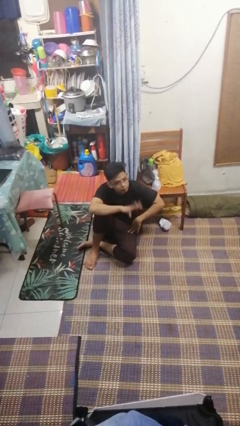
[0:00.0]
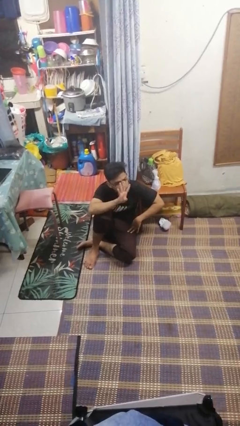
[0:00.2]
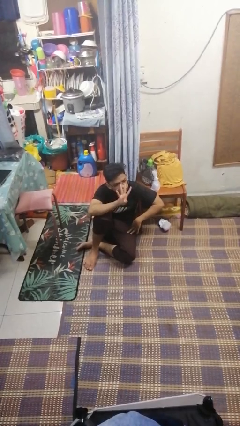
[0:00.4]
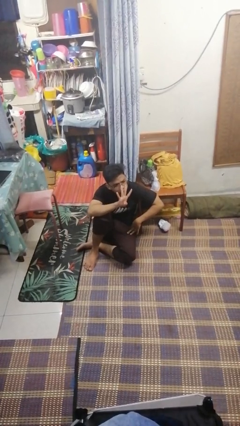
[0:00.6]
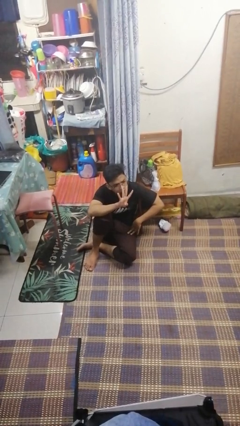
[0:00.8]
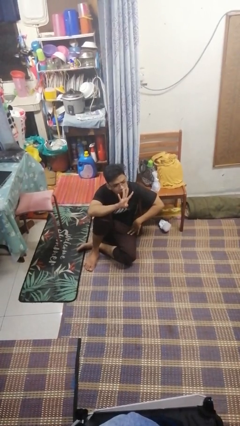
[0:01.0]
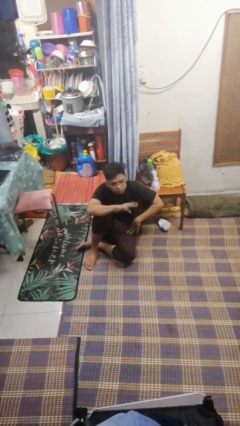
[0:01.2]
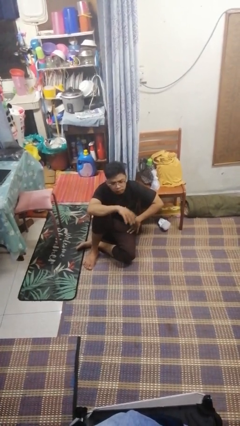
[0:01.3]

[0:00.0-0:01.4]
person gestures number four

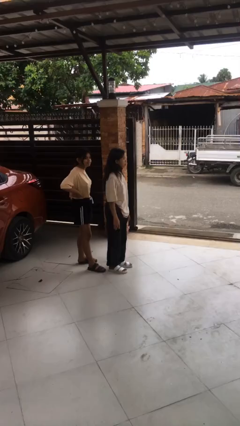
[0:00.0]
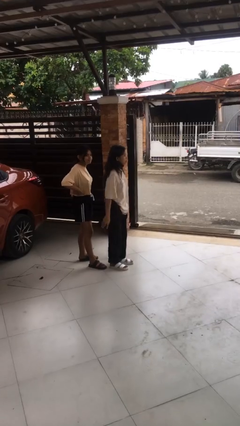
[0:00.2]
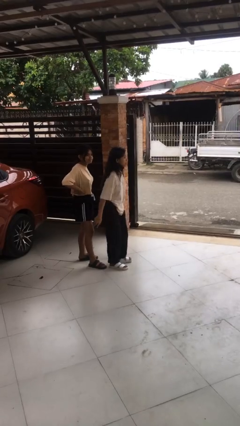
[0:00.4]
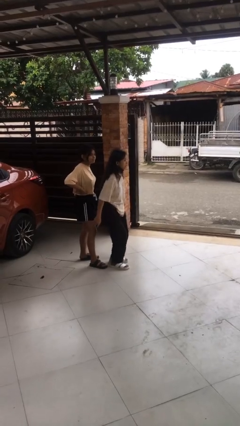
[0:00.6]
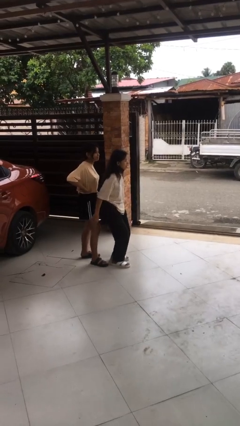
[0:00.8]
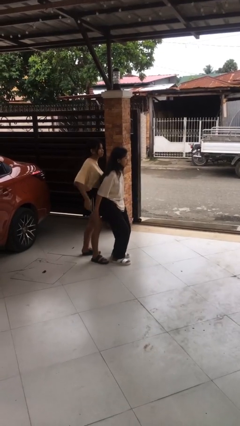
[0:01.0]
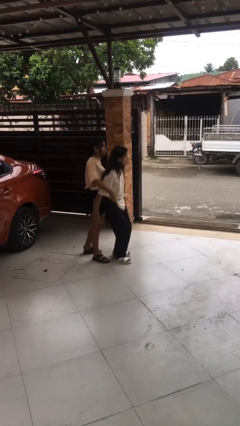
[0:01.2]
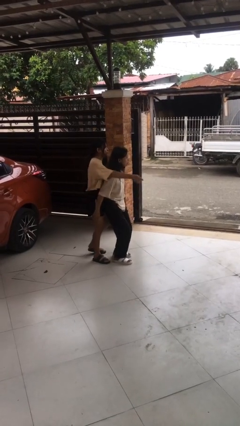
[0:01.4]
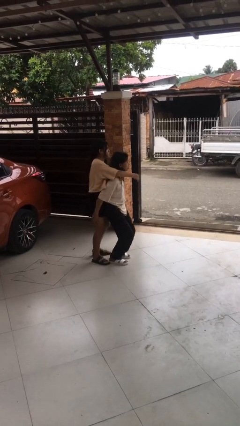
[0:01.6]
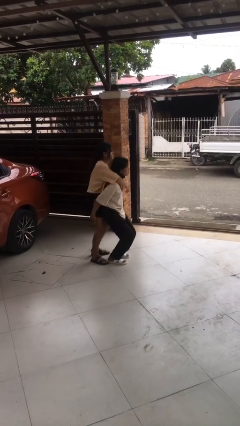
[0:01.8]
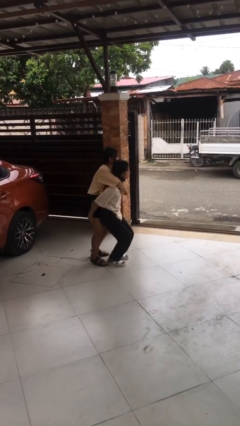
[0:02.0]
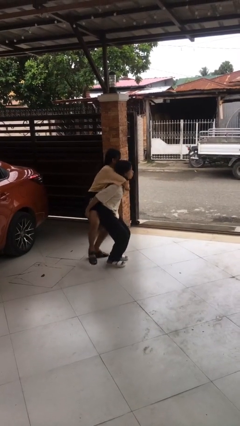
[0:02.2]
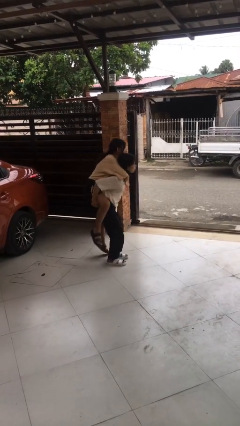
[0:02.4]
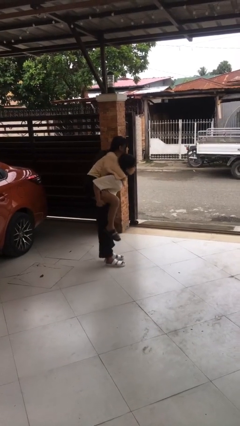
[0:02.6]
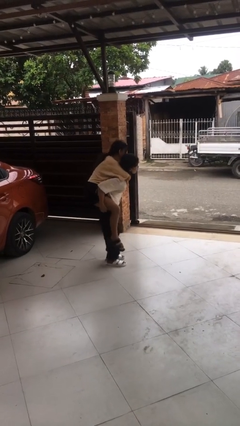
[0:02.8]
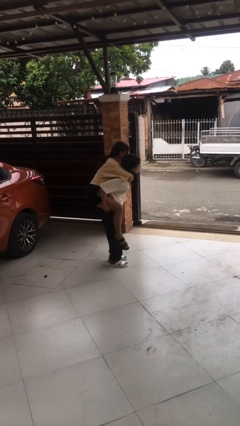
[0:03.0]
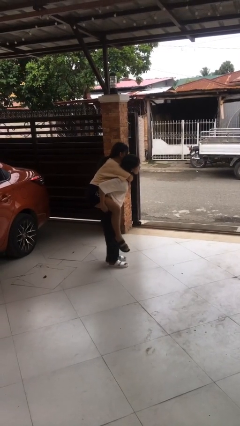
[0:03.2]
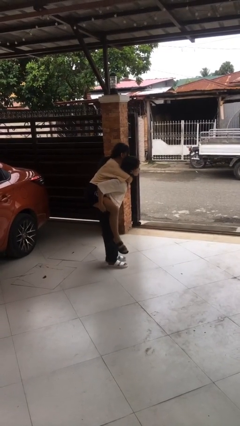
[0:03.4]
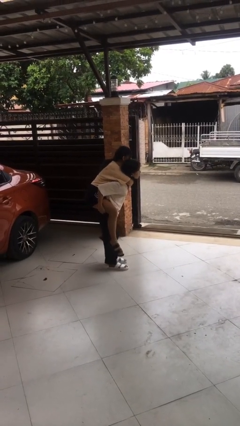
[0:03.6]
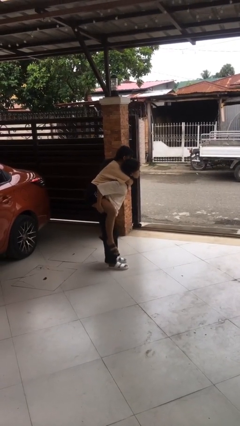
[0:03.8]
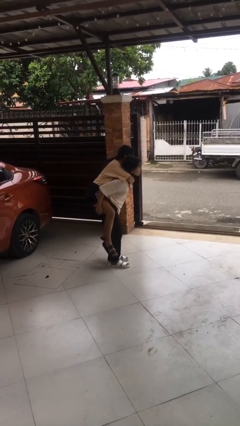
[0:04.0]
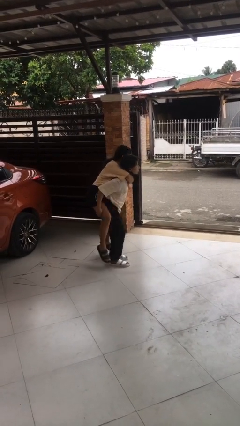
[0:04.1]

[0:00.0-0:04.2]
person carries person over shoulder

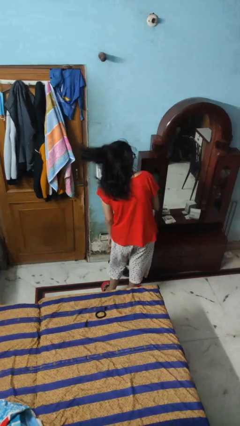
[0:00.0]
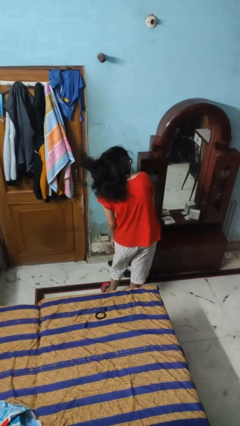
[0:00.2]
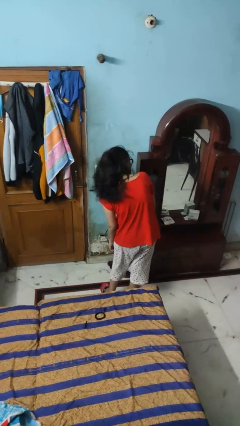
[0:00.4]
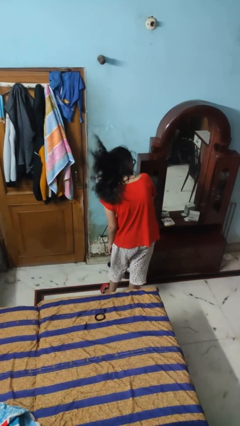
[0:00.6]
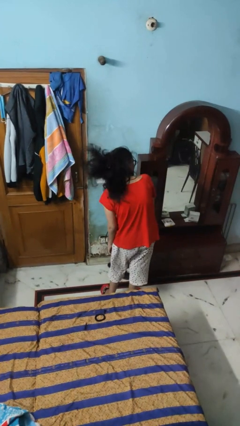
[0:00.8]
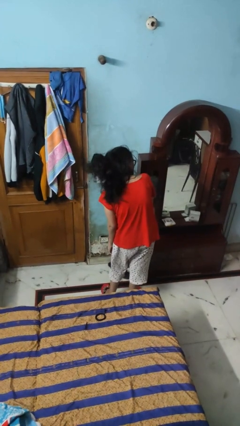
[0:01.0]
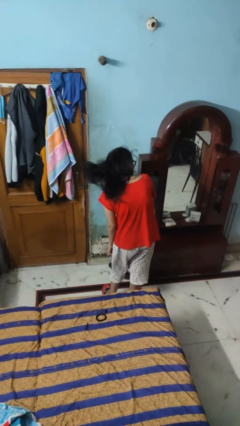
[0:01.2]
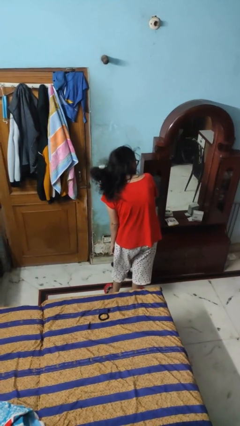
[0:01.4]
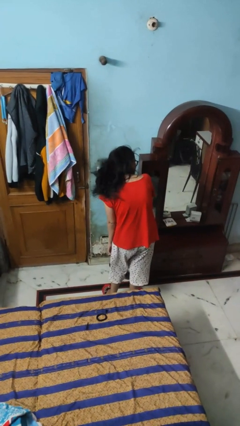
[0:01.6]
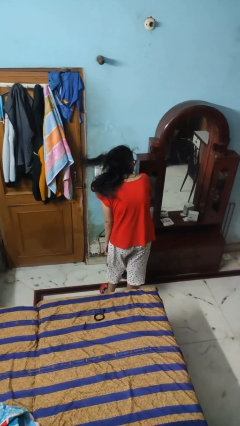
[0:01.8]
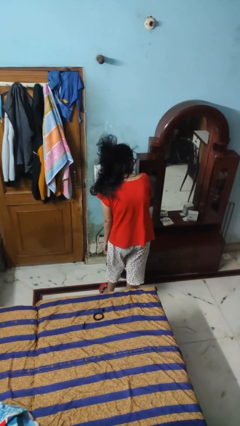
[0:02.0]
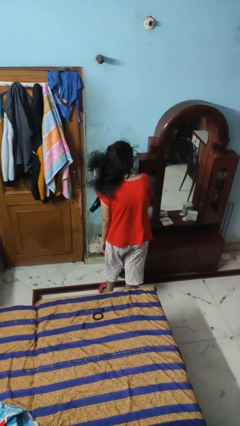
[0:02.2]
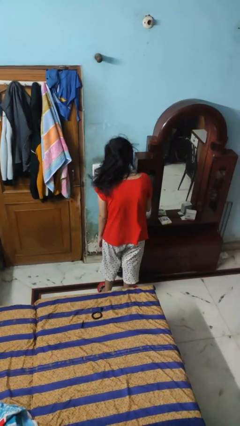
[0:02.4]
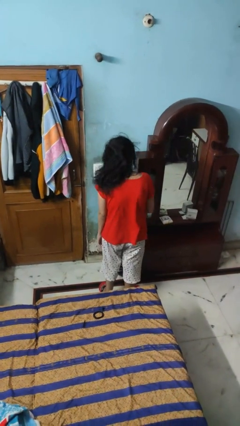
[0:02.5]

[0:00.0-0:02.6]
person dries hair with hairdryer

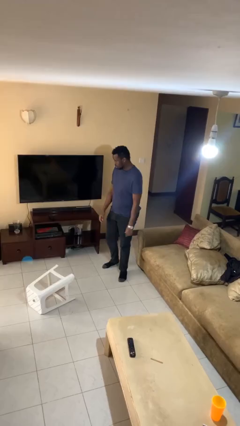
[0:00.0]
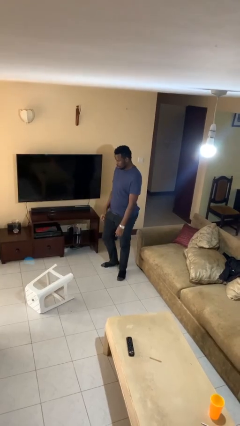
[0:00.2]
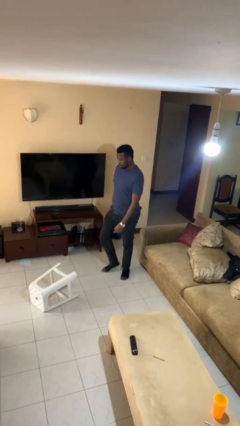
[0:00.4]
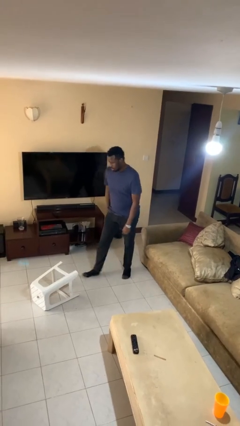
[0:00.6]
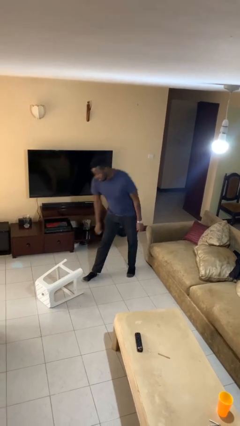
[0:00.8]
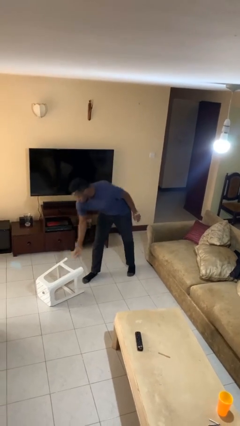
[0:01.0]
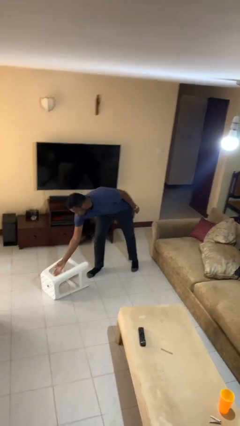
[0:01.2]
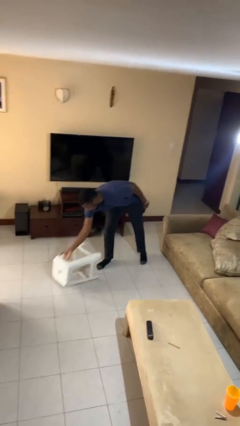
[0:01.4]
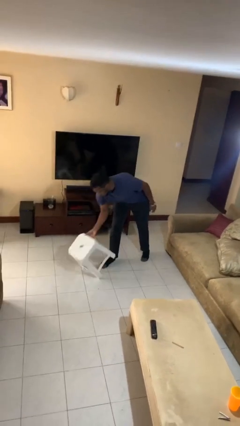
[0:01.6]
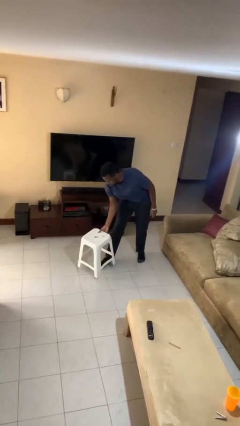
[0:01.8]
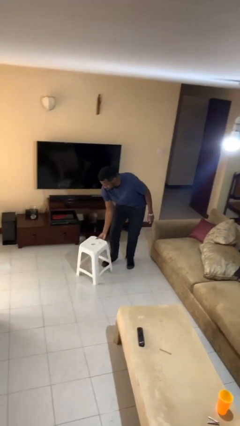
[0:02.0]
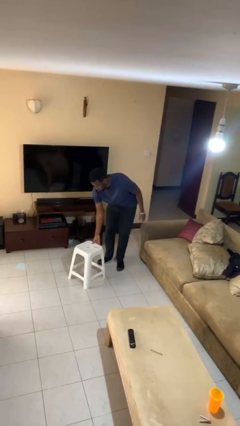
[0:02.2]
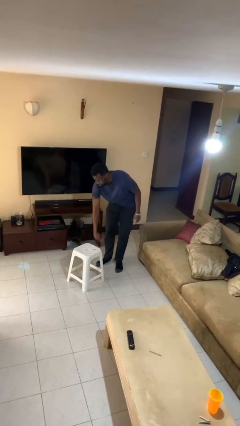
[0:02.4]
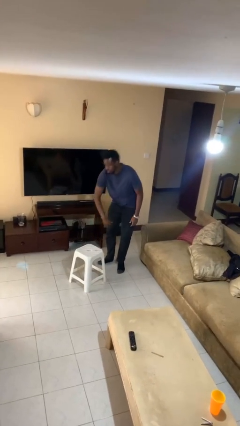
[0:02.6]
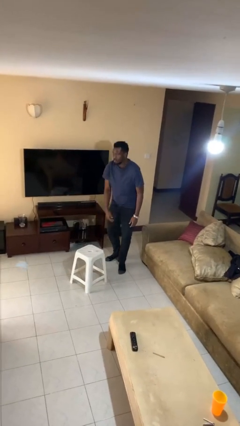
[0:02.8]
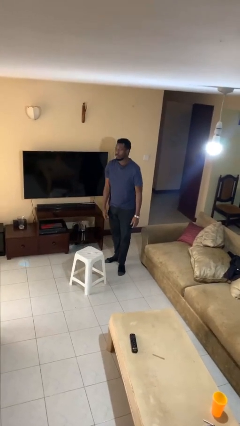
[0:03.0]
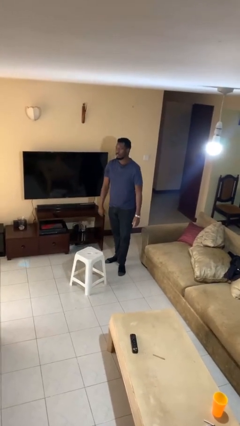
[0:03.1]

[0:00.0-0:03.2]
person sets upright furniture

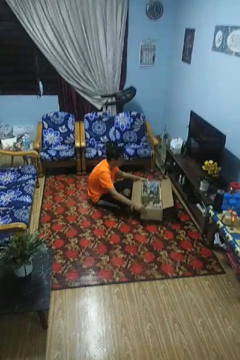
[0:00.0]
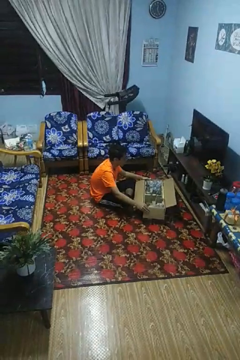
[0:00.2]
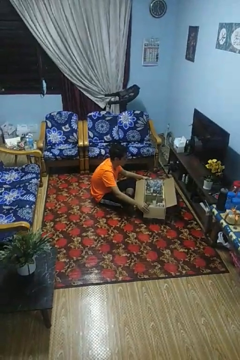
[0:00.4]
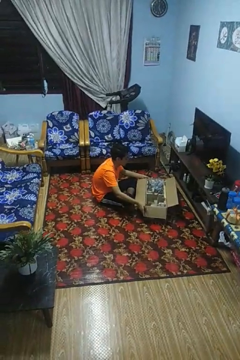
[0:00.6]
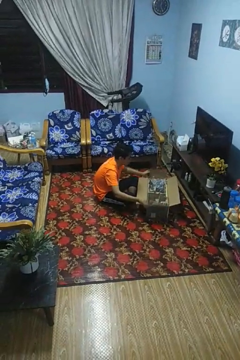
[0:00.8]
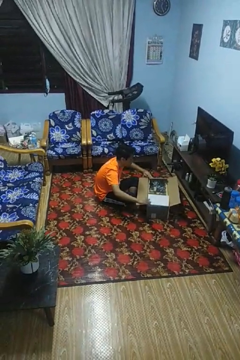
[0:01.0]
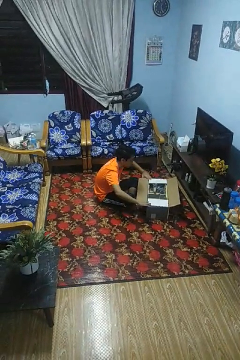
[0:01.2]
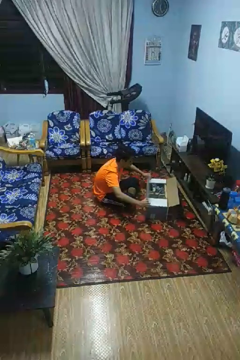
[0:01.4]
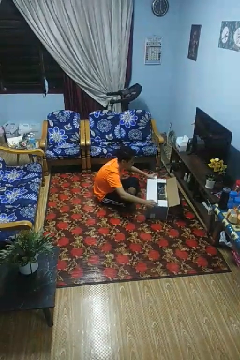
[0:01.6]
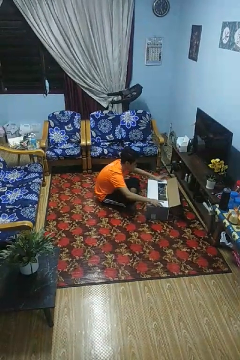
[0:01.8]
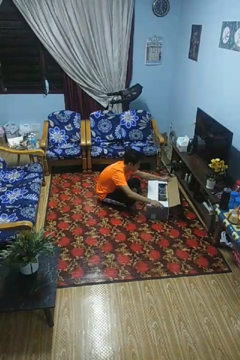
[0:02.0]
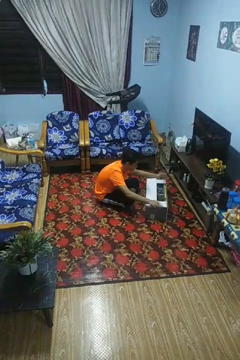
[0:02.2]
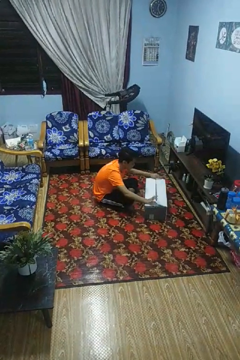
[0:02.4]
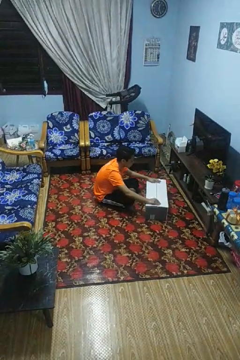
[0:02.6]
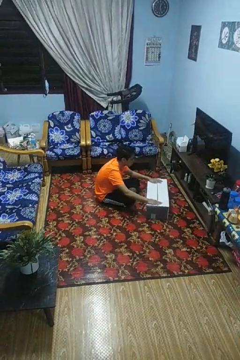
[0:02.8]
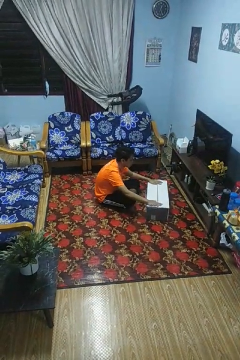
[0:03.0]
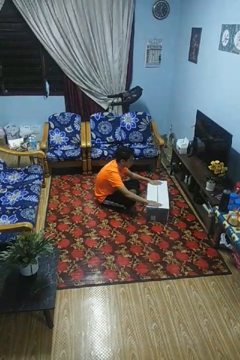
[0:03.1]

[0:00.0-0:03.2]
person closes box

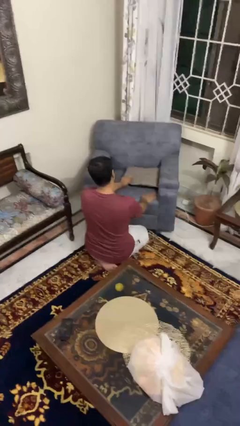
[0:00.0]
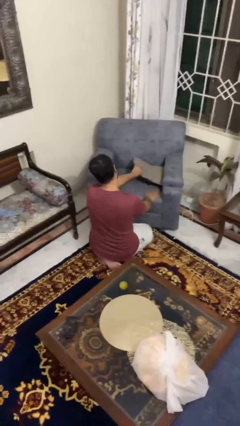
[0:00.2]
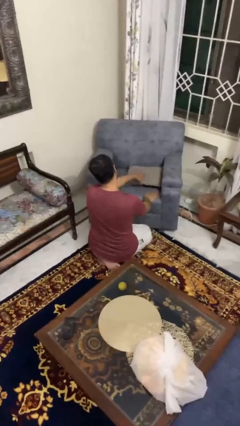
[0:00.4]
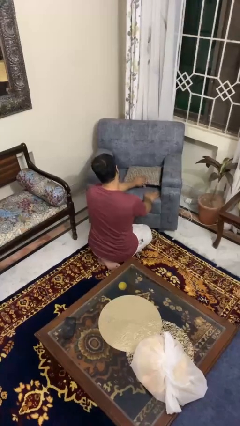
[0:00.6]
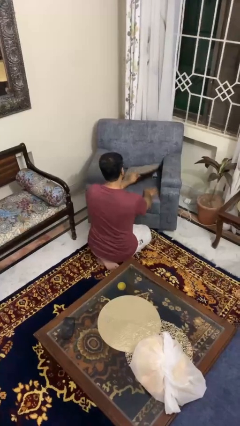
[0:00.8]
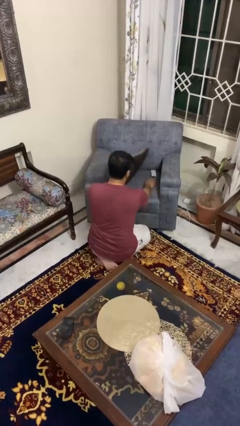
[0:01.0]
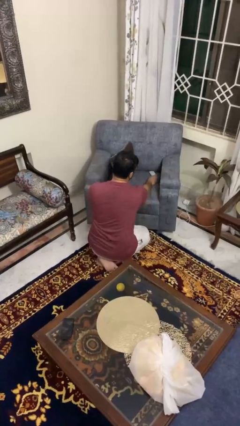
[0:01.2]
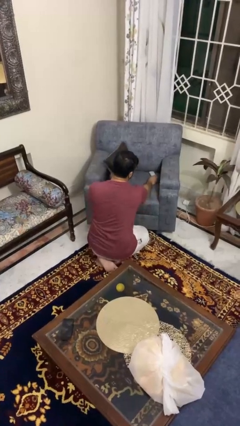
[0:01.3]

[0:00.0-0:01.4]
person searches in couch

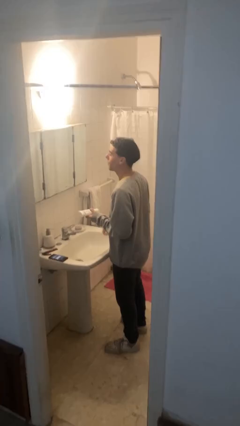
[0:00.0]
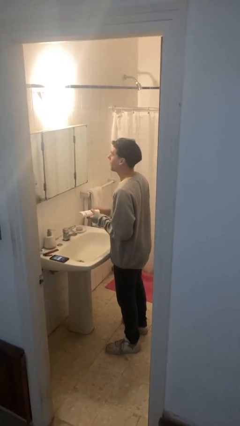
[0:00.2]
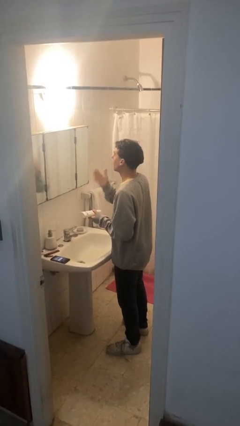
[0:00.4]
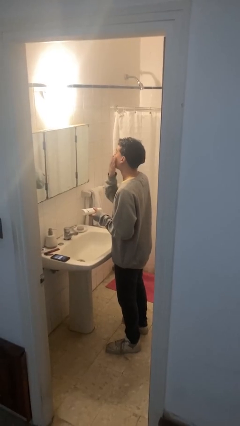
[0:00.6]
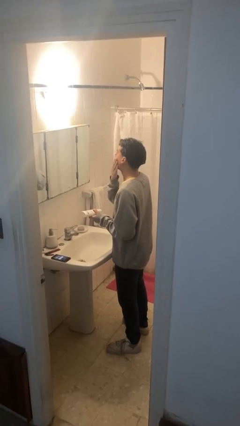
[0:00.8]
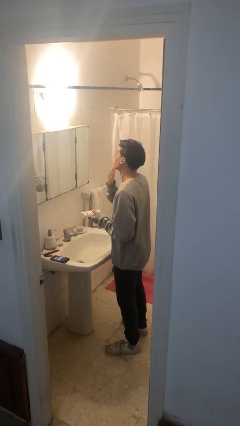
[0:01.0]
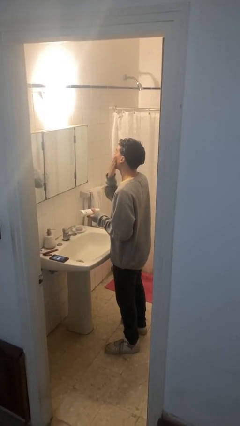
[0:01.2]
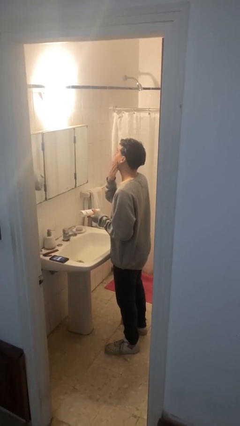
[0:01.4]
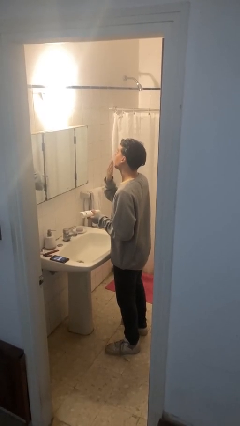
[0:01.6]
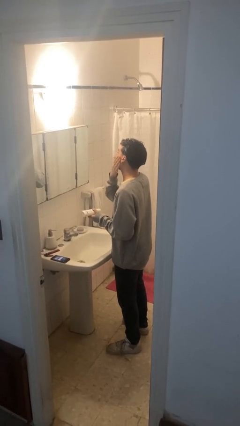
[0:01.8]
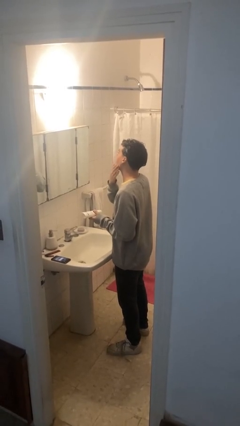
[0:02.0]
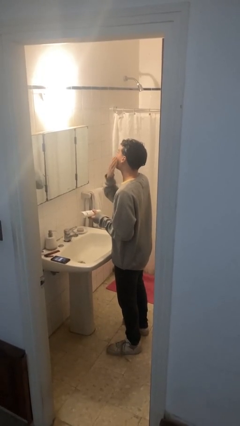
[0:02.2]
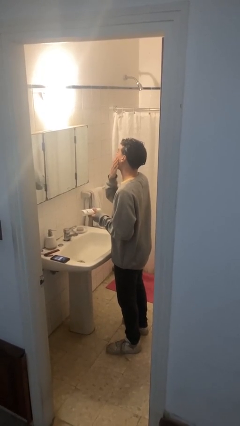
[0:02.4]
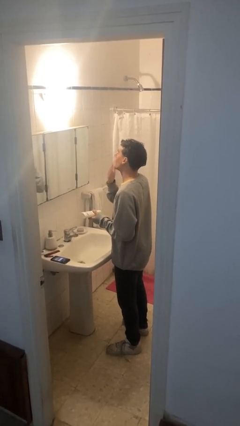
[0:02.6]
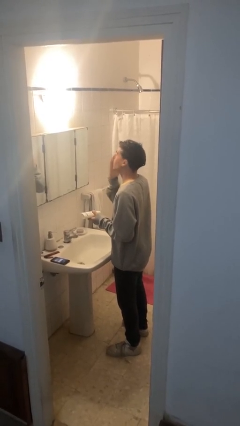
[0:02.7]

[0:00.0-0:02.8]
person applies foundation makeup
